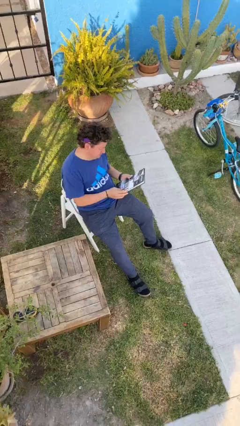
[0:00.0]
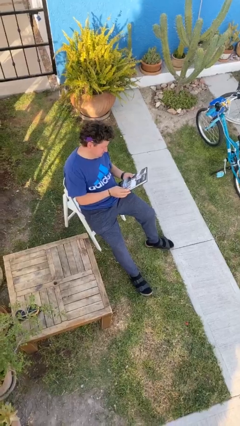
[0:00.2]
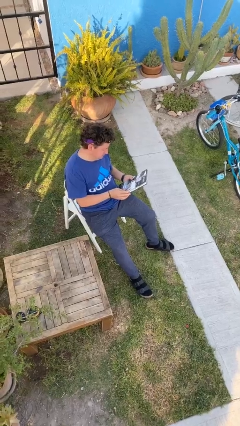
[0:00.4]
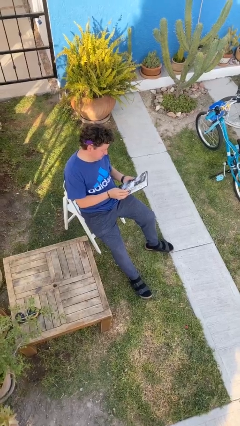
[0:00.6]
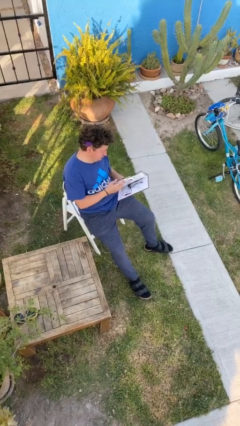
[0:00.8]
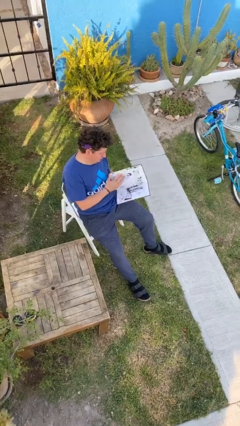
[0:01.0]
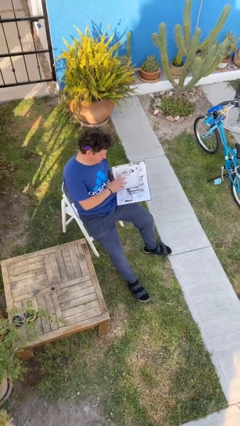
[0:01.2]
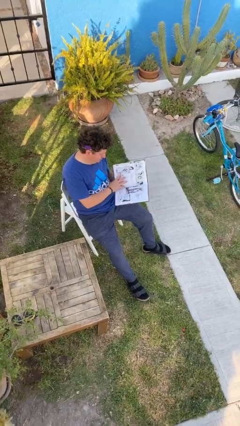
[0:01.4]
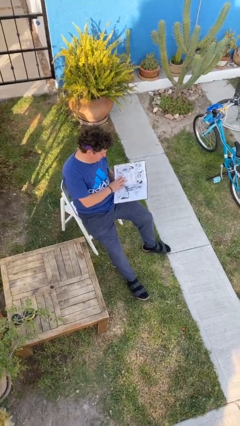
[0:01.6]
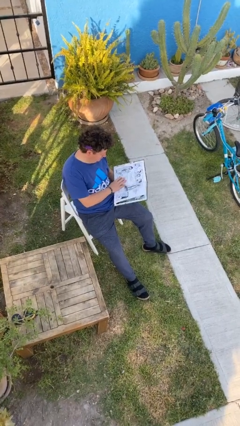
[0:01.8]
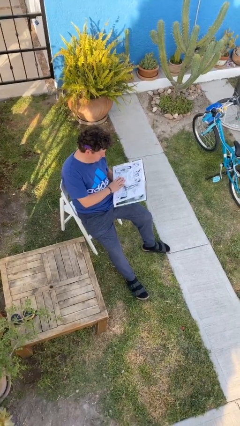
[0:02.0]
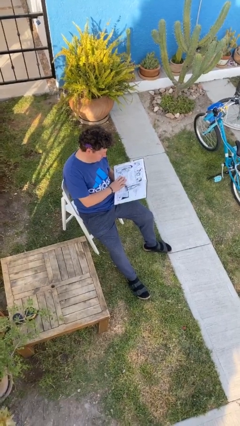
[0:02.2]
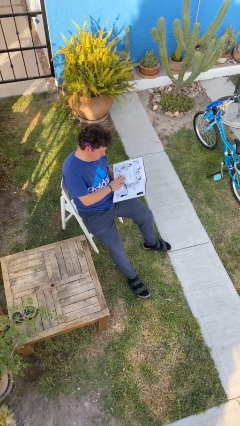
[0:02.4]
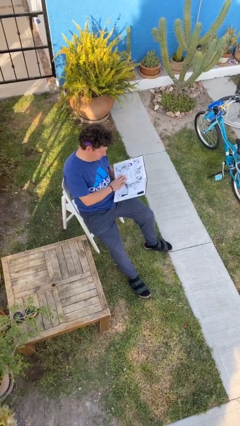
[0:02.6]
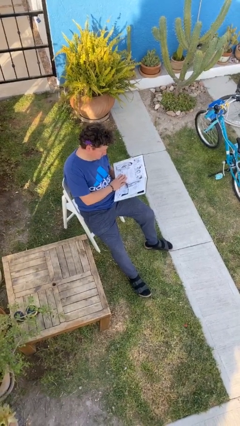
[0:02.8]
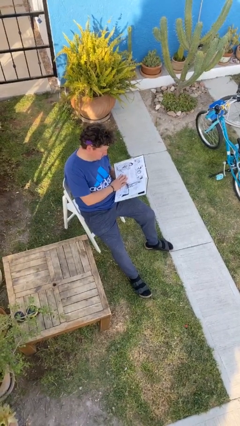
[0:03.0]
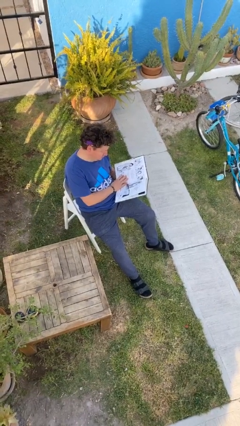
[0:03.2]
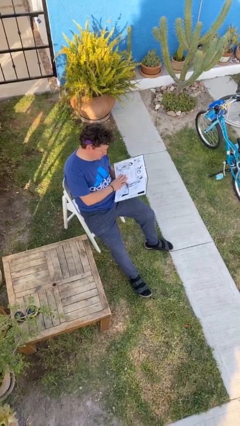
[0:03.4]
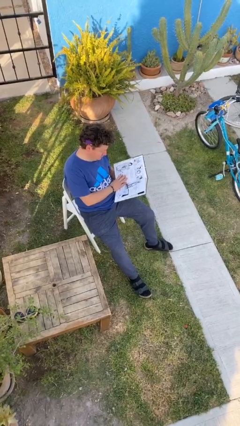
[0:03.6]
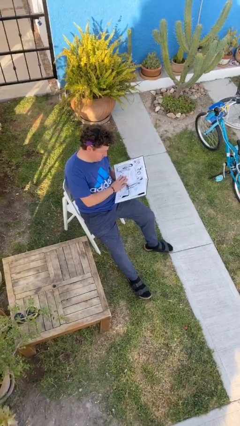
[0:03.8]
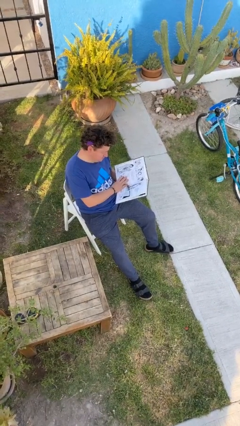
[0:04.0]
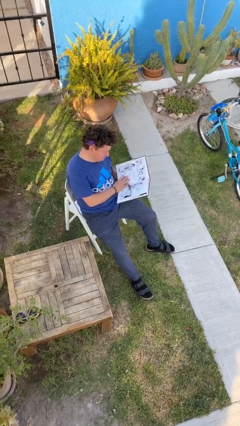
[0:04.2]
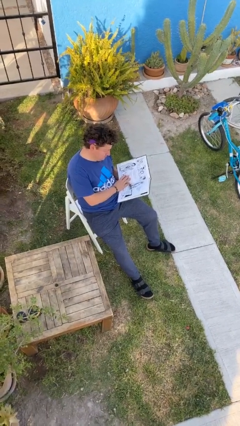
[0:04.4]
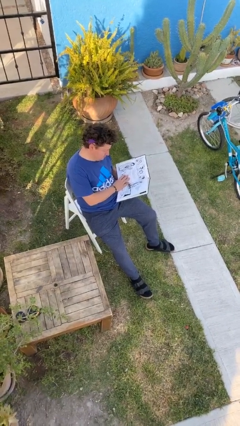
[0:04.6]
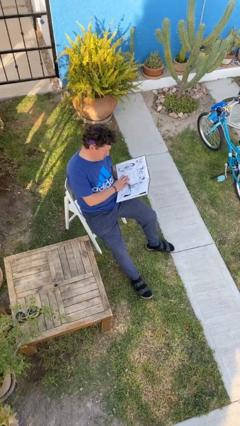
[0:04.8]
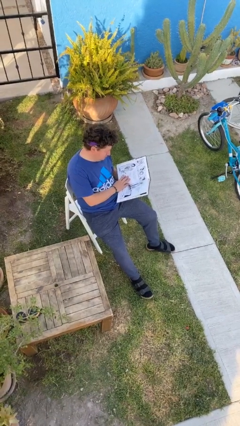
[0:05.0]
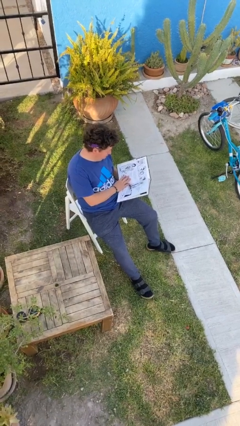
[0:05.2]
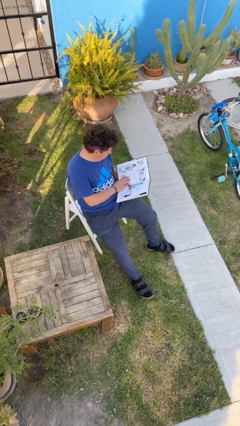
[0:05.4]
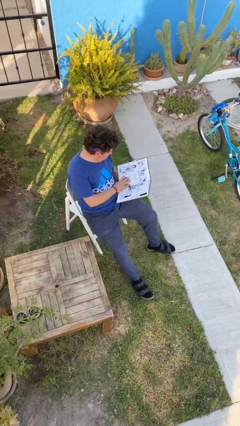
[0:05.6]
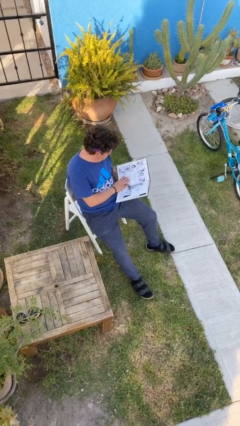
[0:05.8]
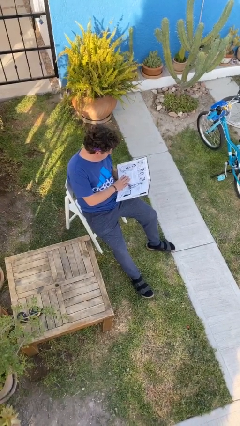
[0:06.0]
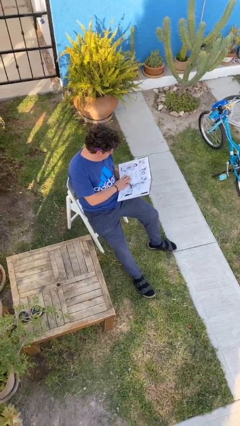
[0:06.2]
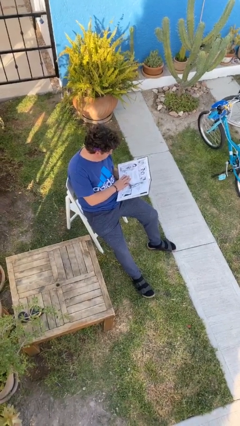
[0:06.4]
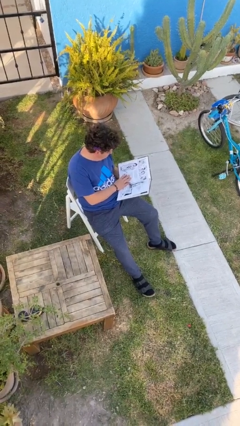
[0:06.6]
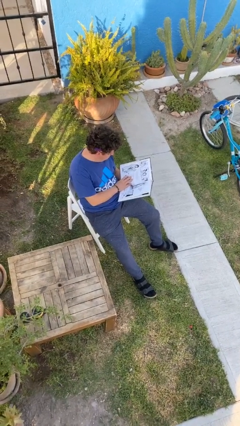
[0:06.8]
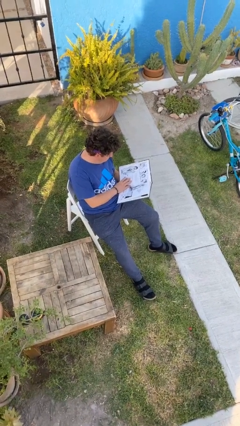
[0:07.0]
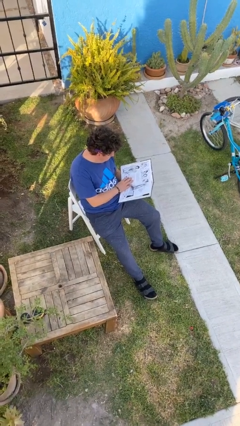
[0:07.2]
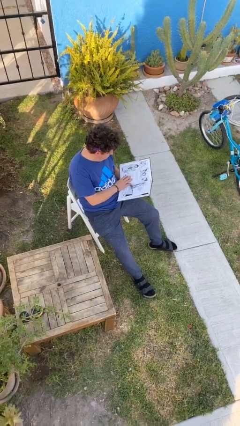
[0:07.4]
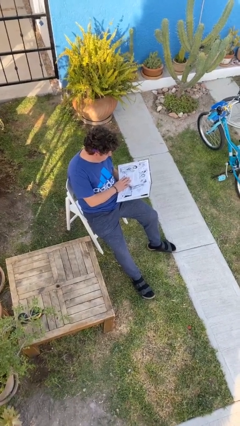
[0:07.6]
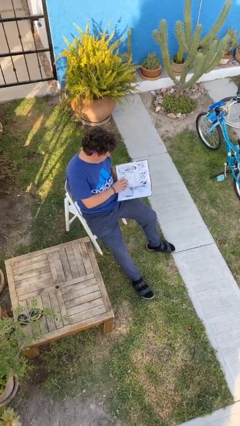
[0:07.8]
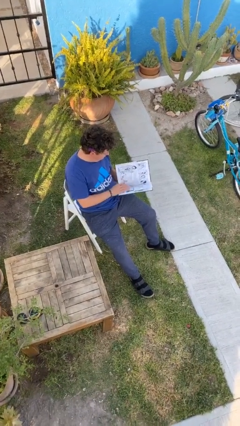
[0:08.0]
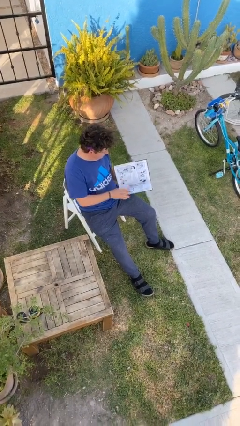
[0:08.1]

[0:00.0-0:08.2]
person reads document

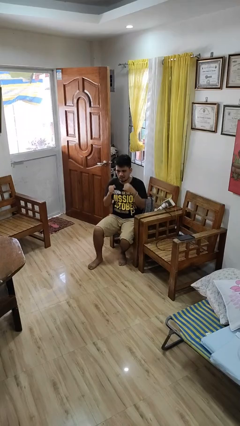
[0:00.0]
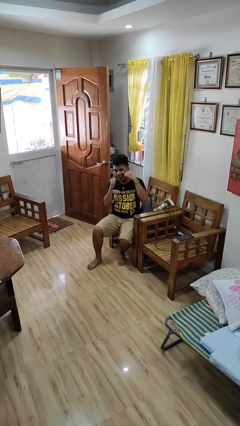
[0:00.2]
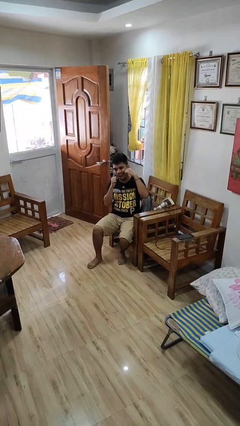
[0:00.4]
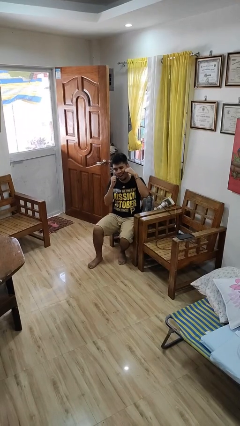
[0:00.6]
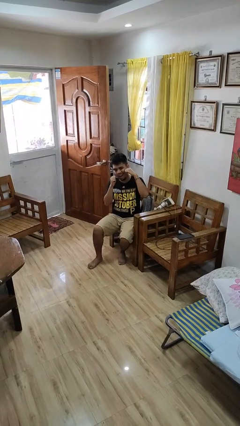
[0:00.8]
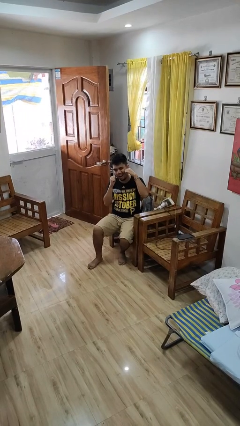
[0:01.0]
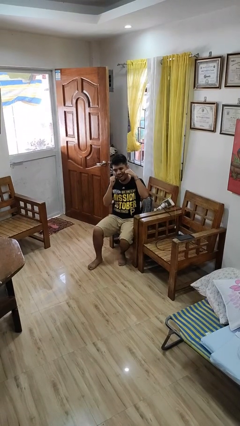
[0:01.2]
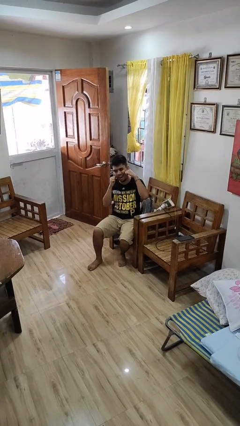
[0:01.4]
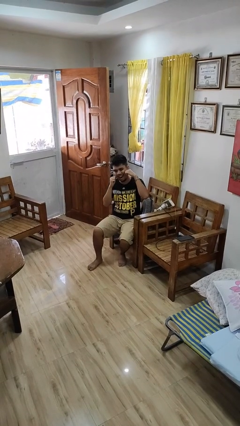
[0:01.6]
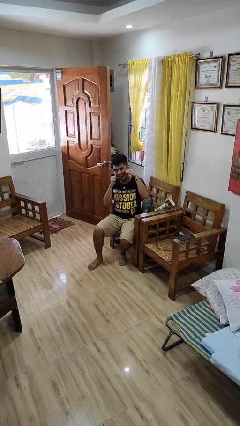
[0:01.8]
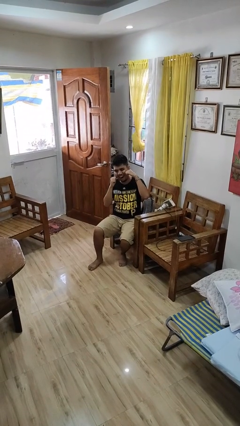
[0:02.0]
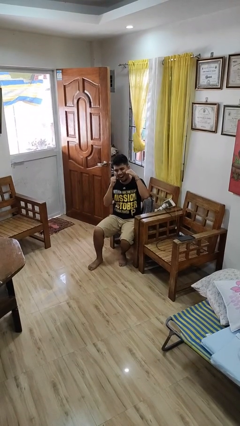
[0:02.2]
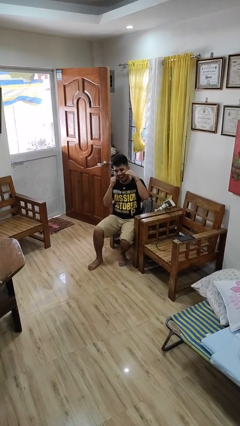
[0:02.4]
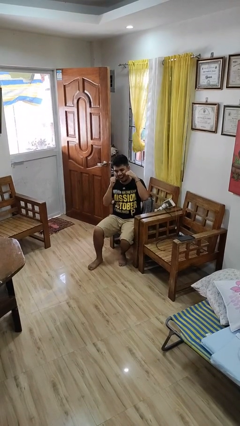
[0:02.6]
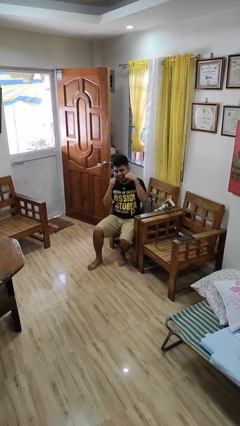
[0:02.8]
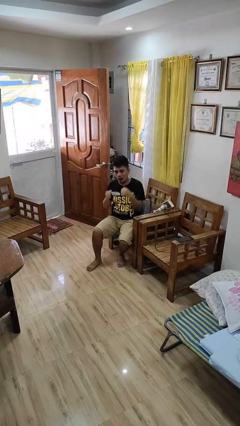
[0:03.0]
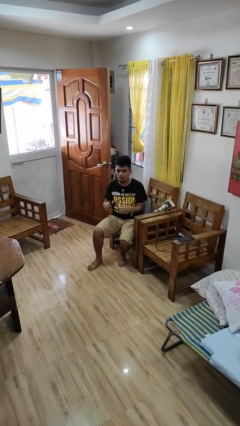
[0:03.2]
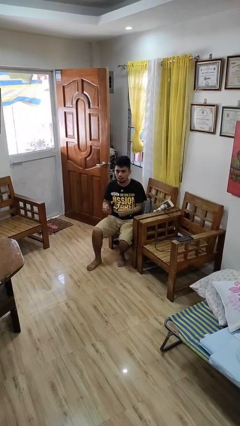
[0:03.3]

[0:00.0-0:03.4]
person flosses

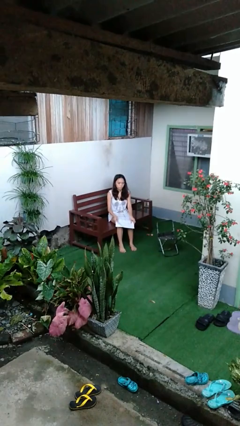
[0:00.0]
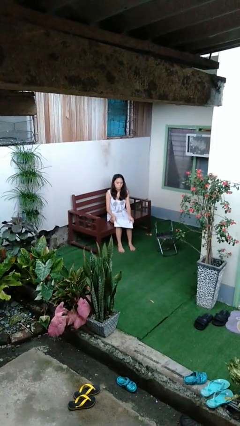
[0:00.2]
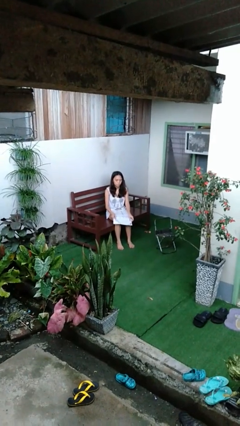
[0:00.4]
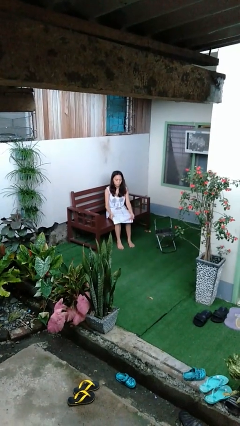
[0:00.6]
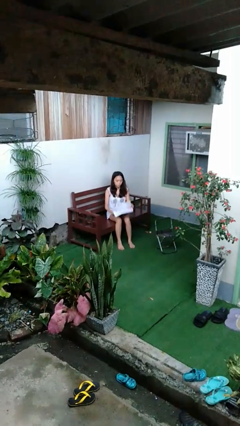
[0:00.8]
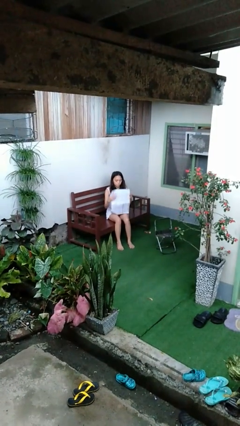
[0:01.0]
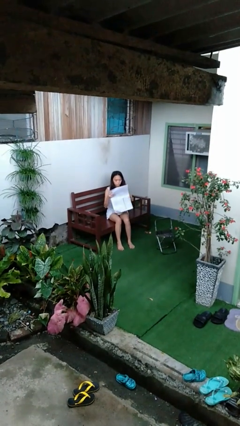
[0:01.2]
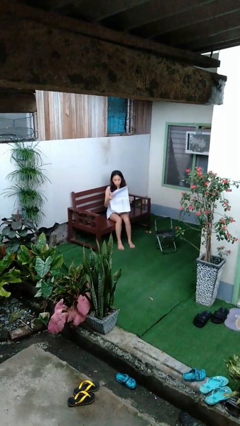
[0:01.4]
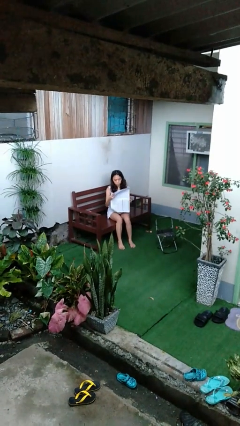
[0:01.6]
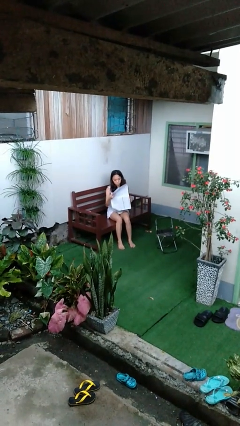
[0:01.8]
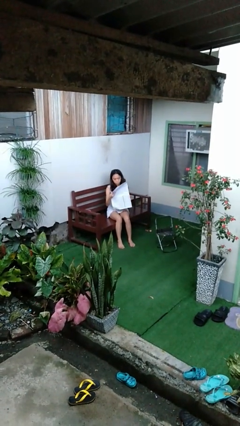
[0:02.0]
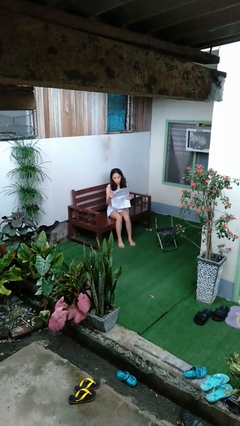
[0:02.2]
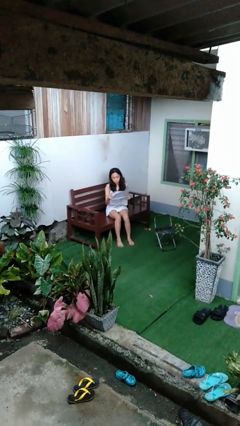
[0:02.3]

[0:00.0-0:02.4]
person reads newspaper

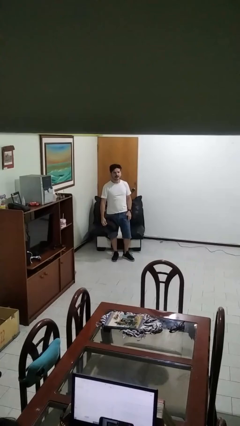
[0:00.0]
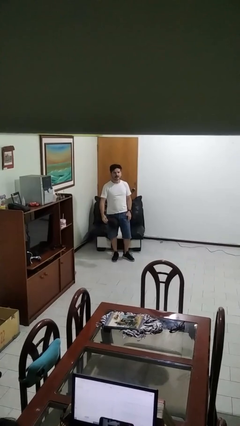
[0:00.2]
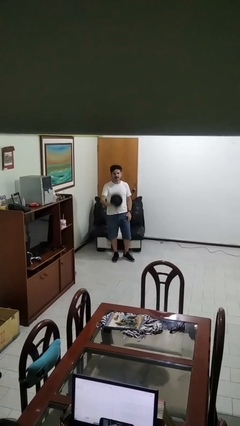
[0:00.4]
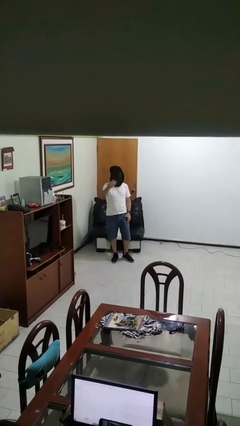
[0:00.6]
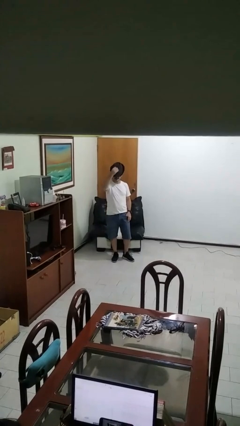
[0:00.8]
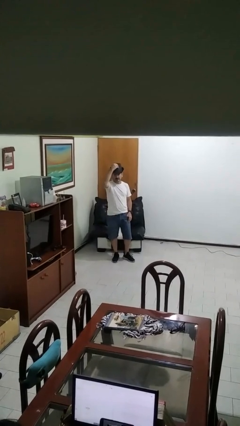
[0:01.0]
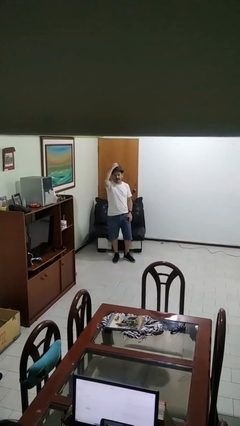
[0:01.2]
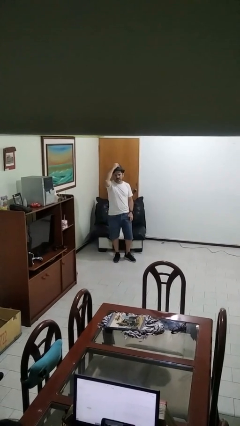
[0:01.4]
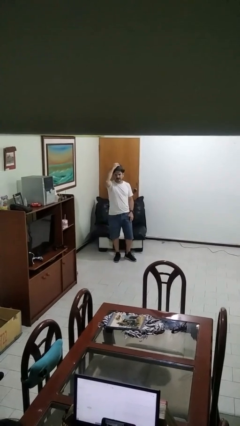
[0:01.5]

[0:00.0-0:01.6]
person puts on hat

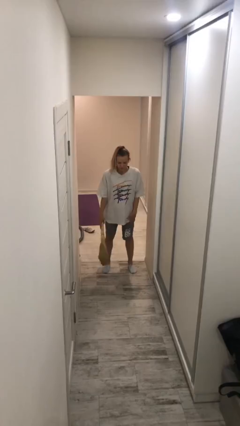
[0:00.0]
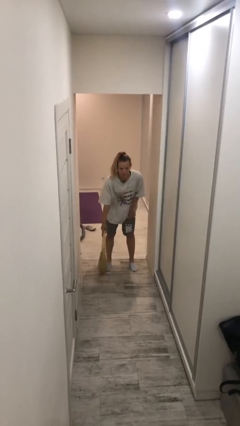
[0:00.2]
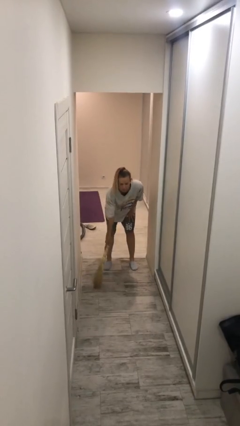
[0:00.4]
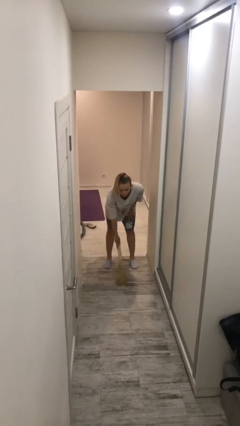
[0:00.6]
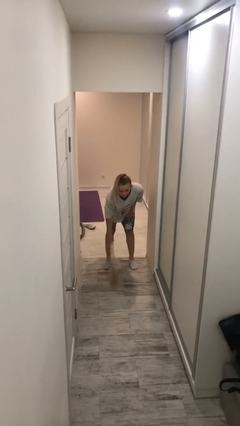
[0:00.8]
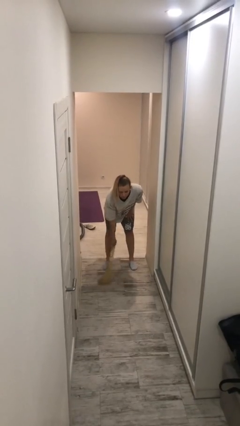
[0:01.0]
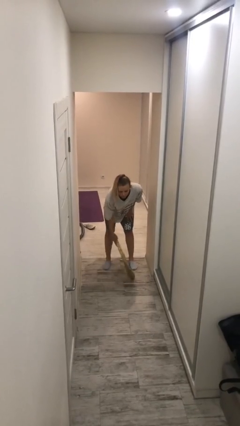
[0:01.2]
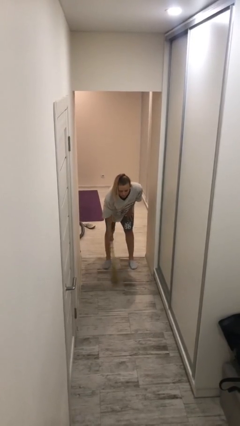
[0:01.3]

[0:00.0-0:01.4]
person sweeps floor

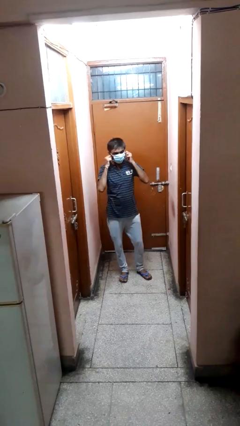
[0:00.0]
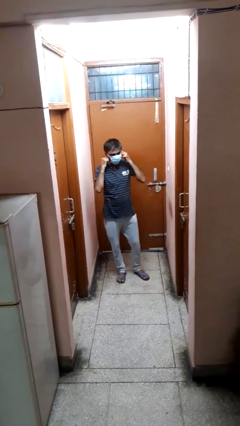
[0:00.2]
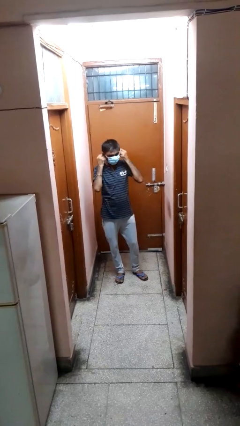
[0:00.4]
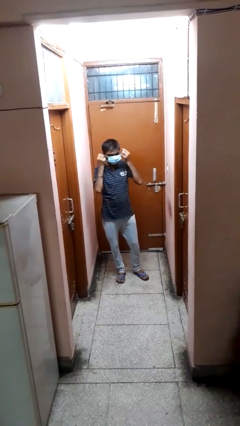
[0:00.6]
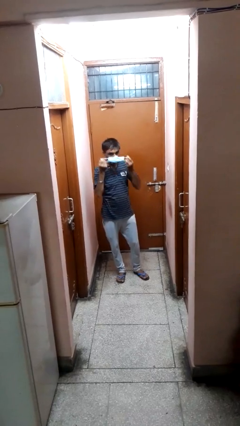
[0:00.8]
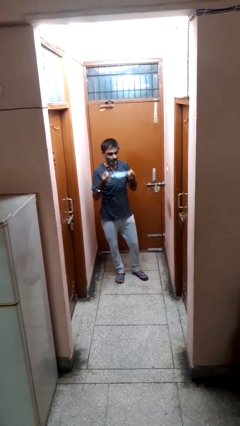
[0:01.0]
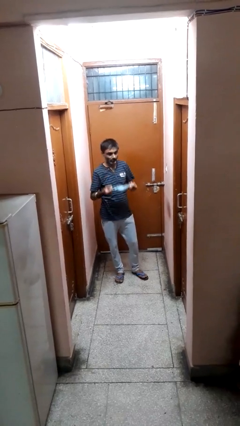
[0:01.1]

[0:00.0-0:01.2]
person takes off facemask
